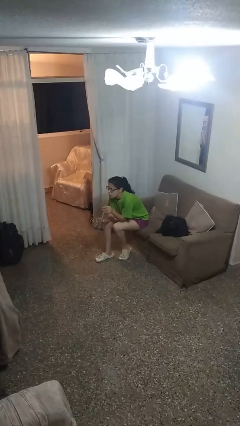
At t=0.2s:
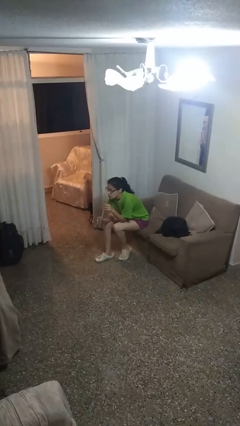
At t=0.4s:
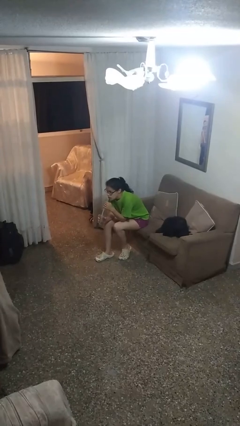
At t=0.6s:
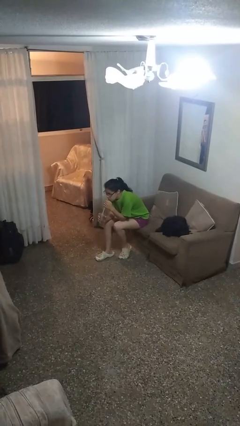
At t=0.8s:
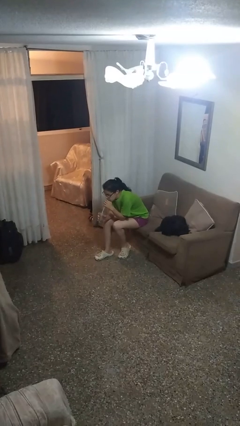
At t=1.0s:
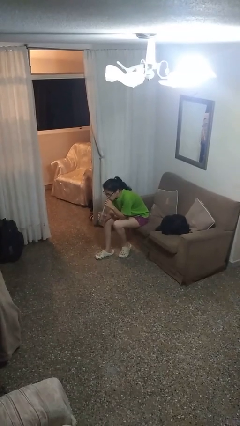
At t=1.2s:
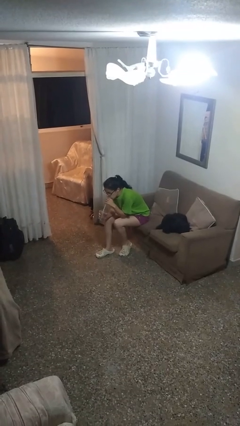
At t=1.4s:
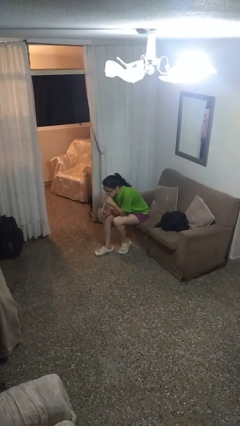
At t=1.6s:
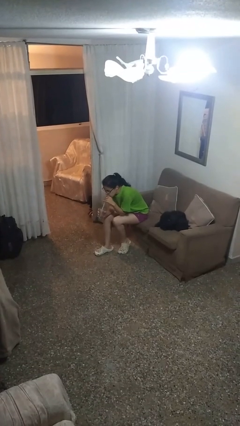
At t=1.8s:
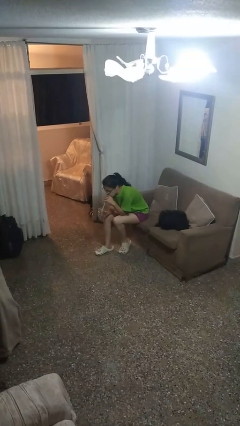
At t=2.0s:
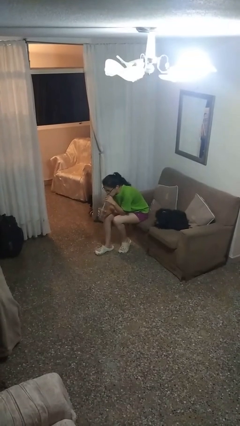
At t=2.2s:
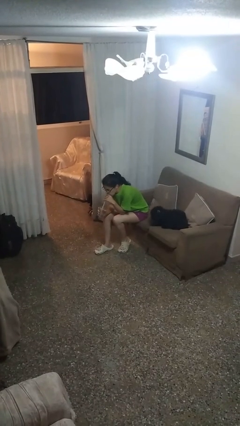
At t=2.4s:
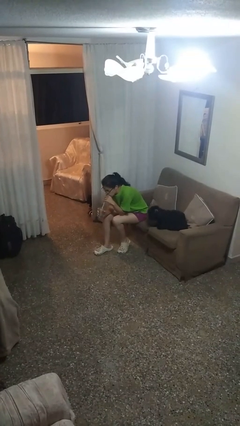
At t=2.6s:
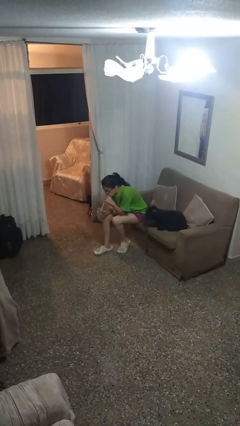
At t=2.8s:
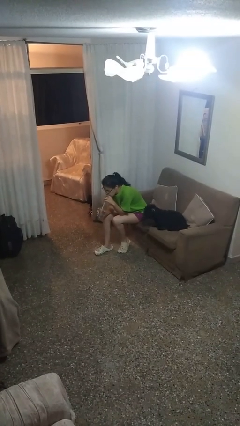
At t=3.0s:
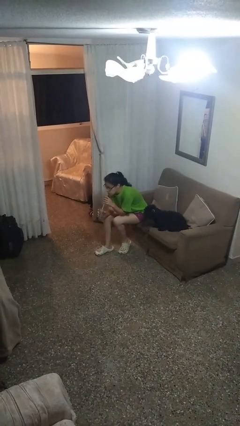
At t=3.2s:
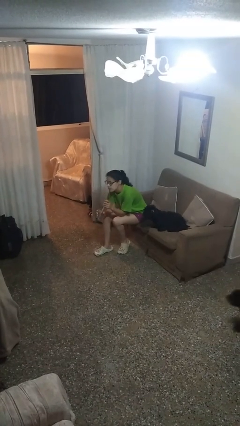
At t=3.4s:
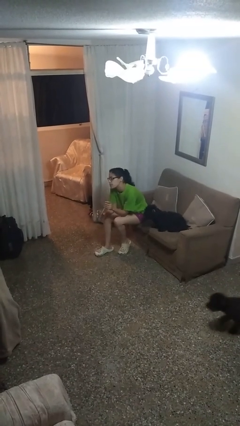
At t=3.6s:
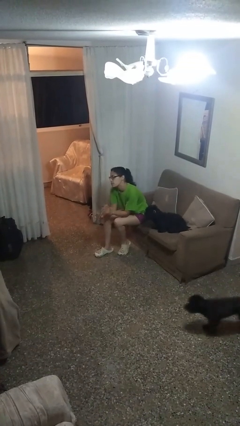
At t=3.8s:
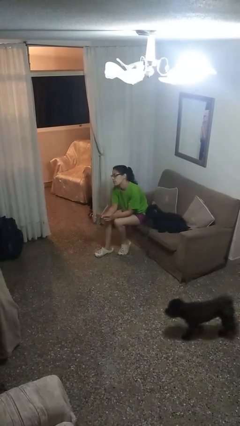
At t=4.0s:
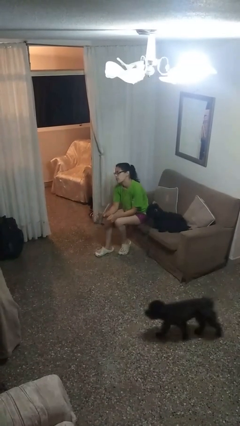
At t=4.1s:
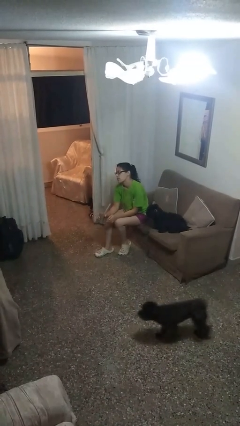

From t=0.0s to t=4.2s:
person drinks from straw

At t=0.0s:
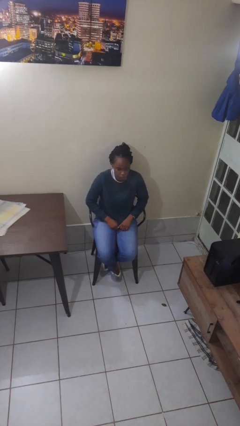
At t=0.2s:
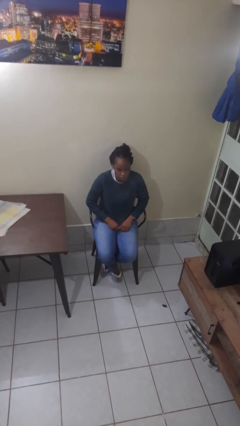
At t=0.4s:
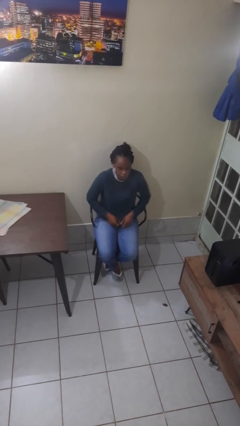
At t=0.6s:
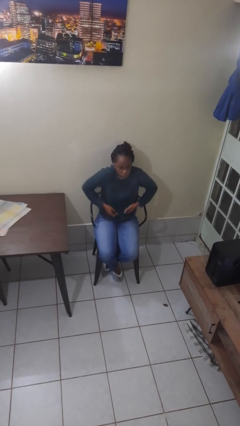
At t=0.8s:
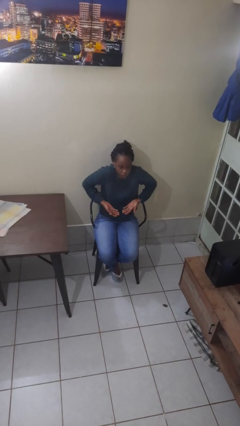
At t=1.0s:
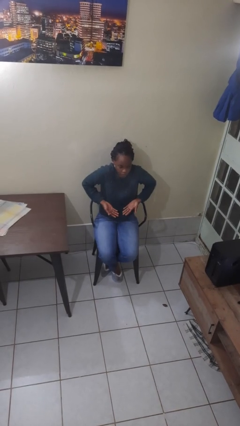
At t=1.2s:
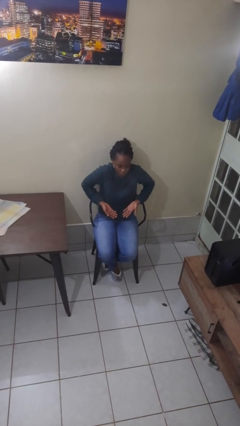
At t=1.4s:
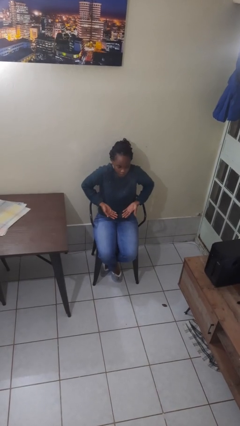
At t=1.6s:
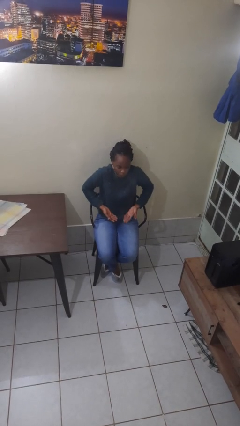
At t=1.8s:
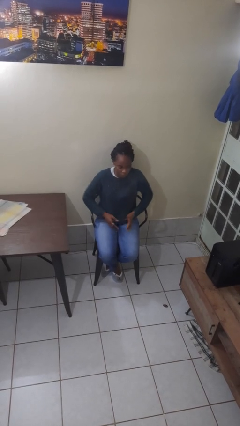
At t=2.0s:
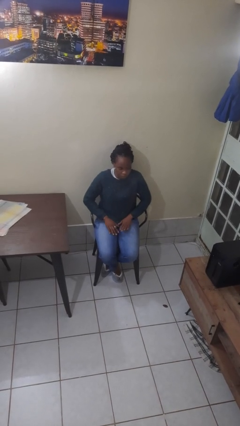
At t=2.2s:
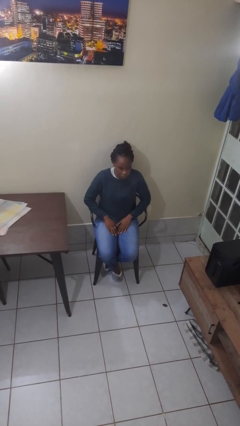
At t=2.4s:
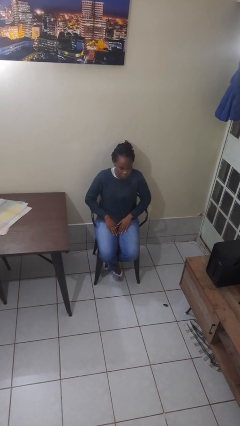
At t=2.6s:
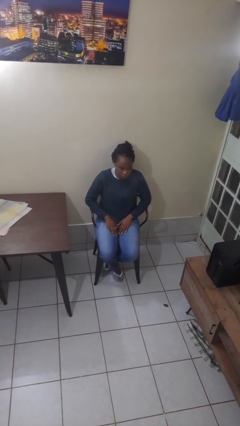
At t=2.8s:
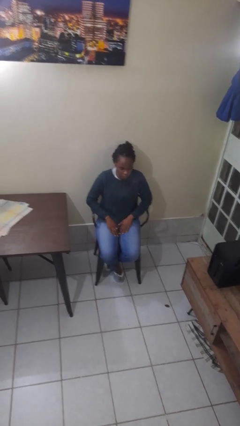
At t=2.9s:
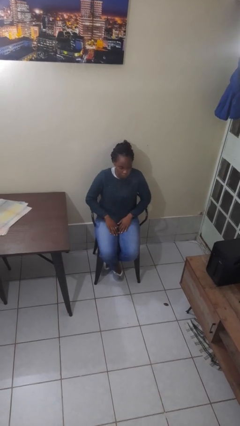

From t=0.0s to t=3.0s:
person shrugs

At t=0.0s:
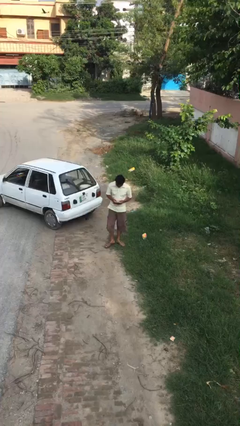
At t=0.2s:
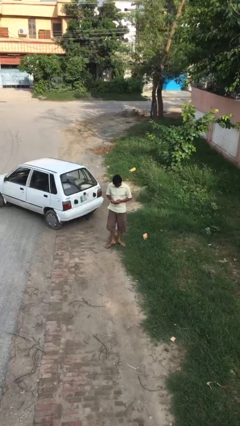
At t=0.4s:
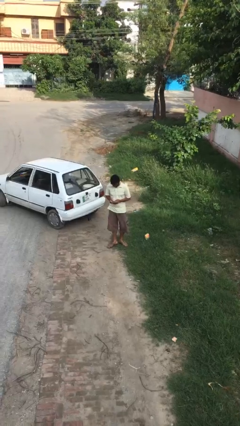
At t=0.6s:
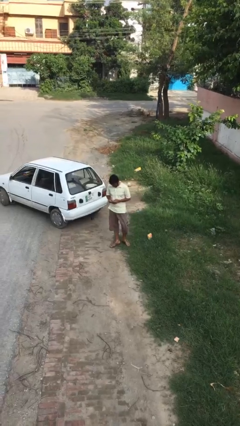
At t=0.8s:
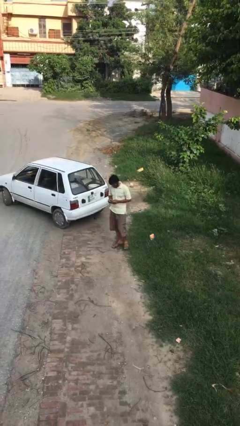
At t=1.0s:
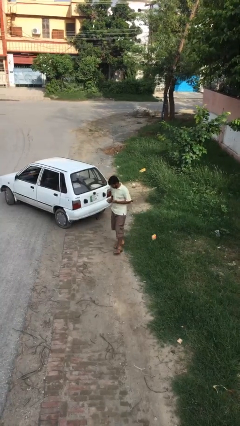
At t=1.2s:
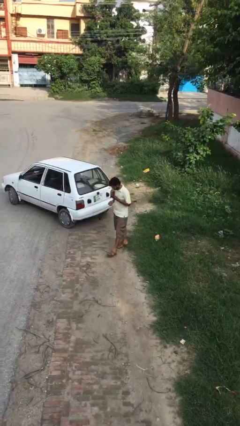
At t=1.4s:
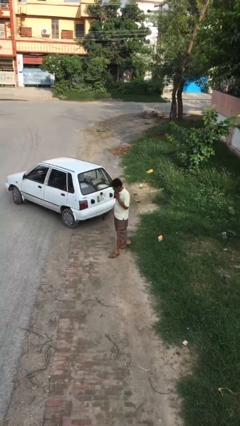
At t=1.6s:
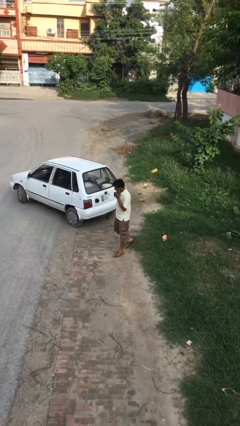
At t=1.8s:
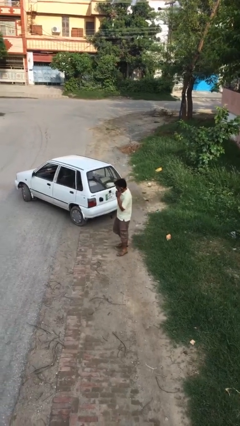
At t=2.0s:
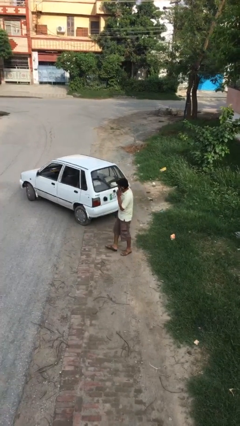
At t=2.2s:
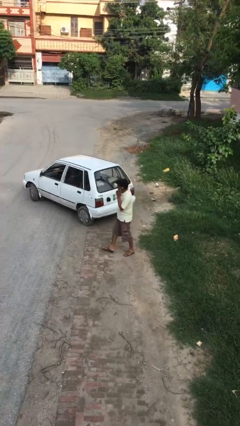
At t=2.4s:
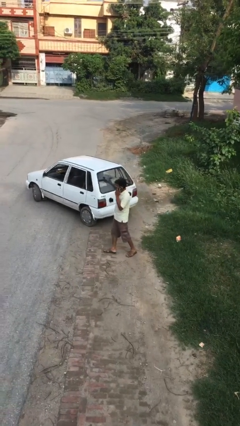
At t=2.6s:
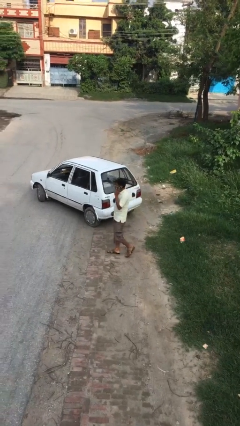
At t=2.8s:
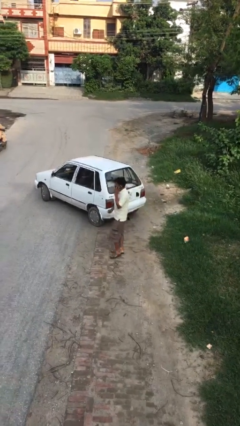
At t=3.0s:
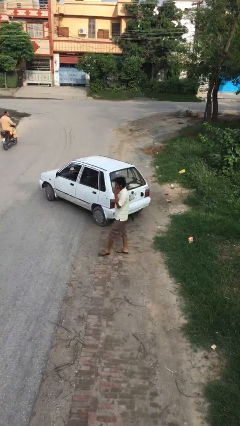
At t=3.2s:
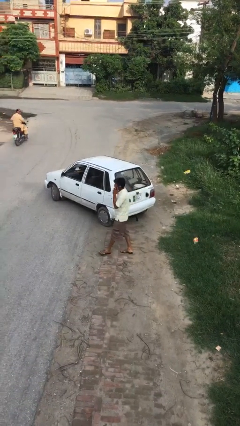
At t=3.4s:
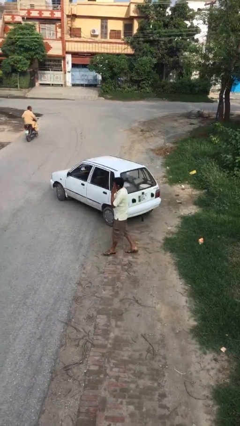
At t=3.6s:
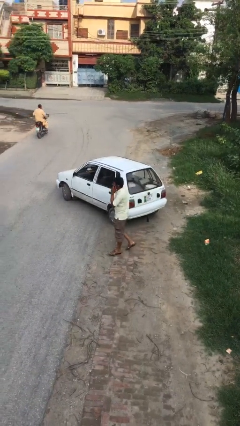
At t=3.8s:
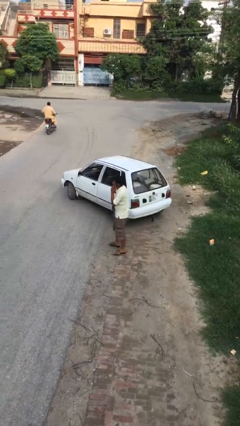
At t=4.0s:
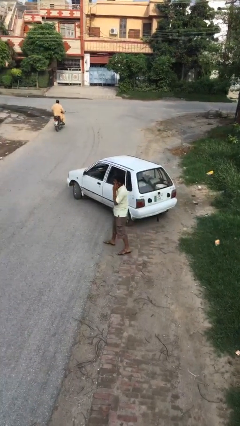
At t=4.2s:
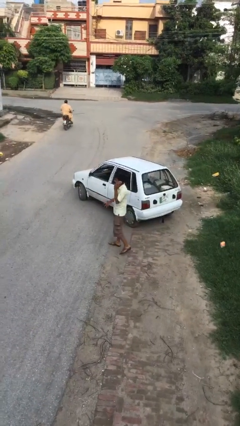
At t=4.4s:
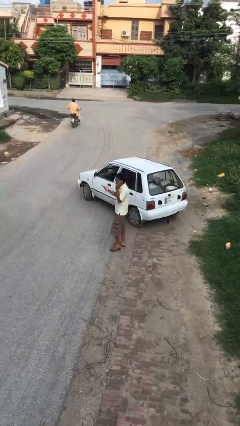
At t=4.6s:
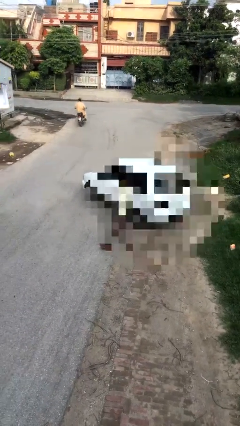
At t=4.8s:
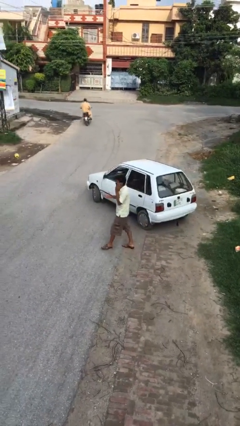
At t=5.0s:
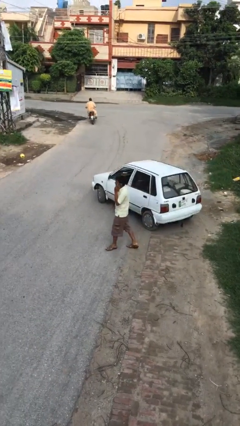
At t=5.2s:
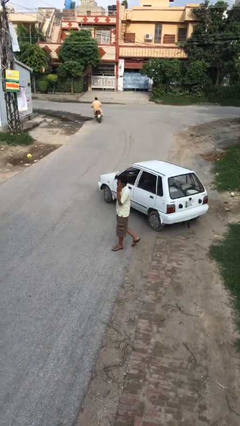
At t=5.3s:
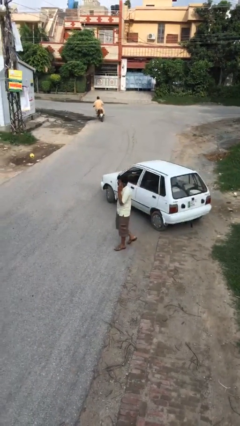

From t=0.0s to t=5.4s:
person talks on phone

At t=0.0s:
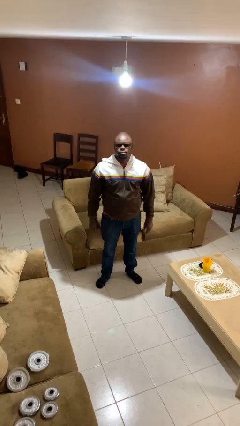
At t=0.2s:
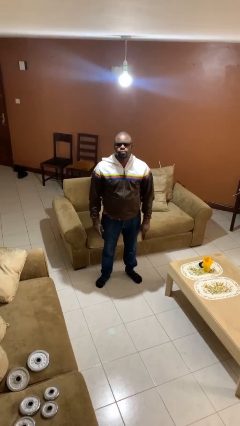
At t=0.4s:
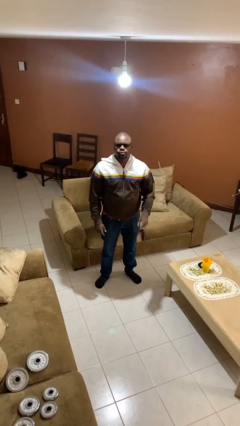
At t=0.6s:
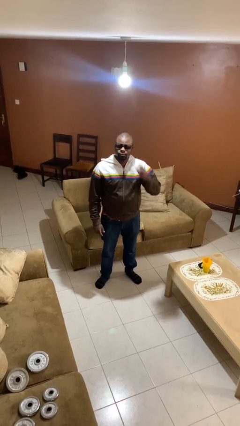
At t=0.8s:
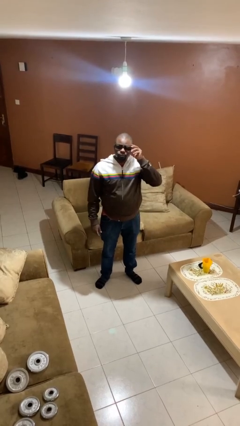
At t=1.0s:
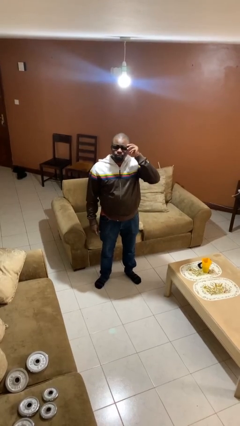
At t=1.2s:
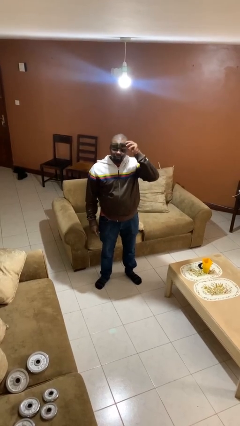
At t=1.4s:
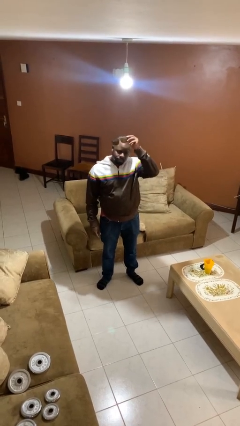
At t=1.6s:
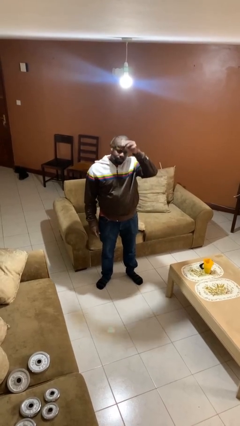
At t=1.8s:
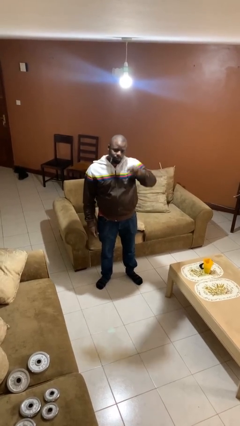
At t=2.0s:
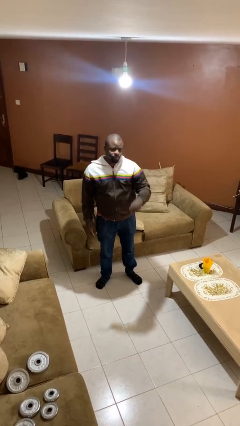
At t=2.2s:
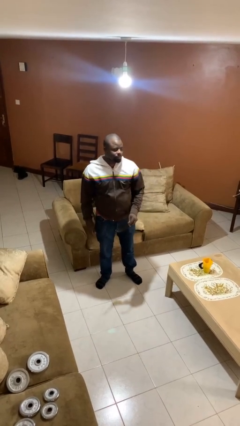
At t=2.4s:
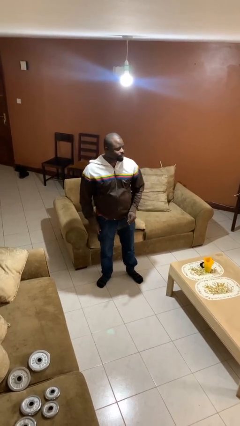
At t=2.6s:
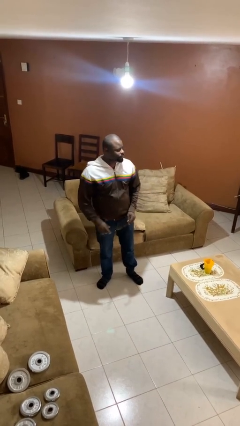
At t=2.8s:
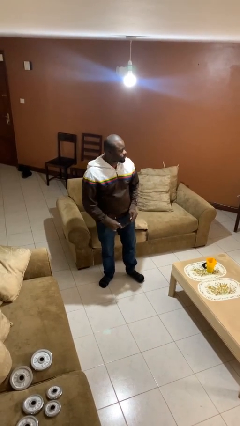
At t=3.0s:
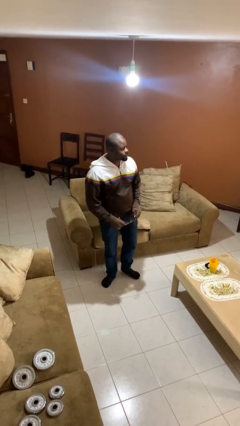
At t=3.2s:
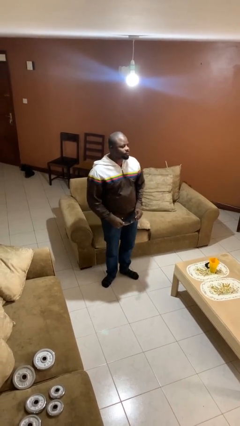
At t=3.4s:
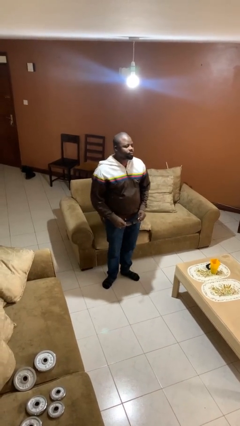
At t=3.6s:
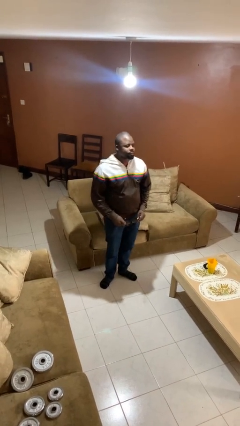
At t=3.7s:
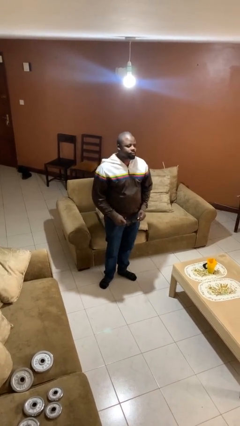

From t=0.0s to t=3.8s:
person takes off sunglasses

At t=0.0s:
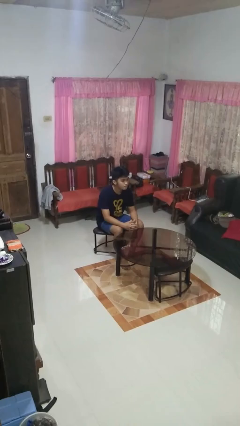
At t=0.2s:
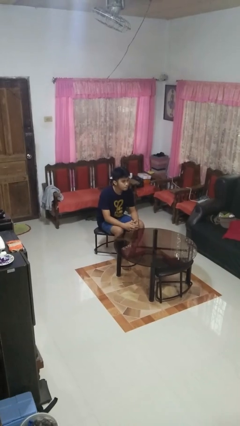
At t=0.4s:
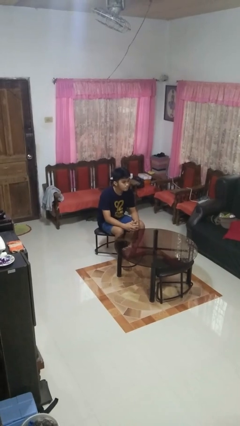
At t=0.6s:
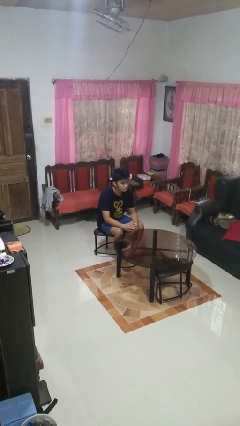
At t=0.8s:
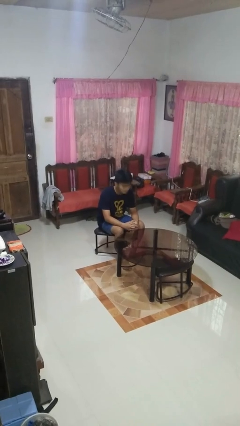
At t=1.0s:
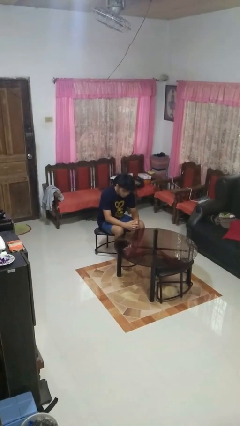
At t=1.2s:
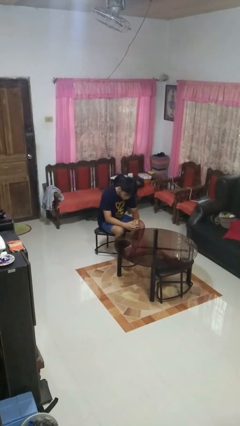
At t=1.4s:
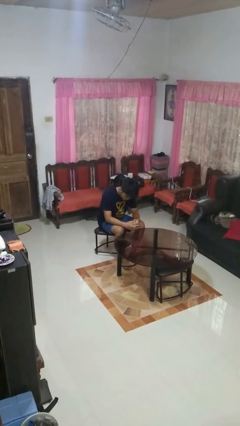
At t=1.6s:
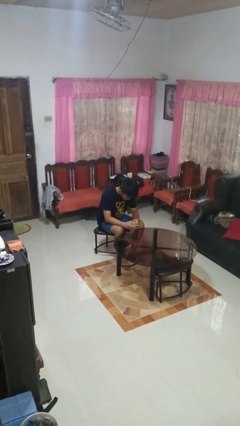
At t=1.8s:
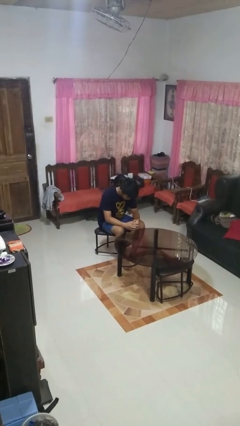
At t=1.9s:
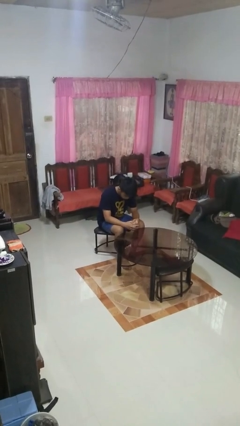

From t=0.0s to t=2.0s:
person shakes head
